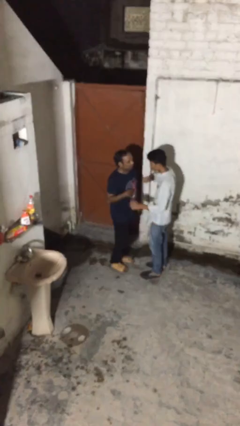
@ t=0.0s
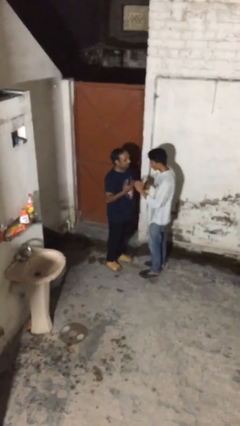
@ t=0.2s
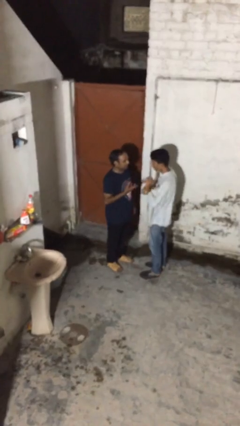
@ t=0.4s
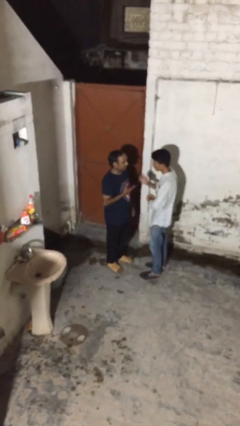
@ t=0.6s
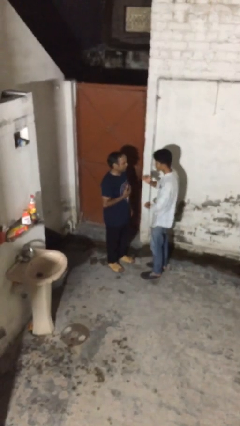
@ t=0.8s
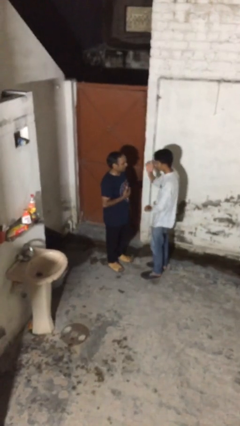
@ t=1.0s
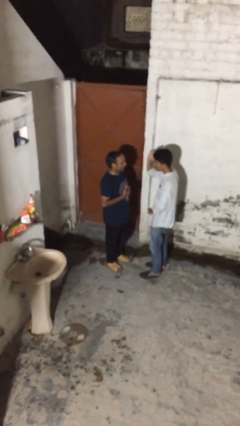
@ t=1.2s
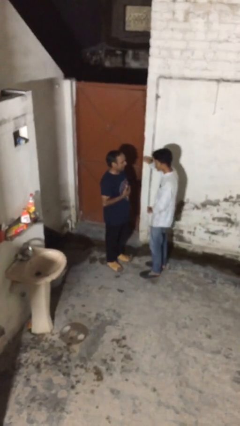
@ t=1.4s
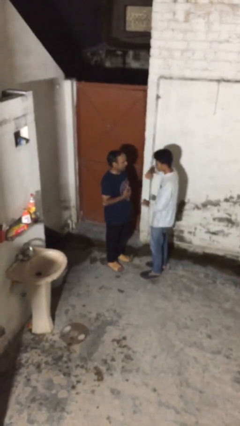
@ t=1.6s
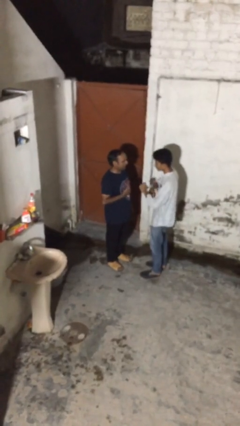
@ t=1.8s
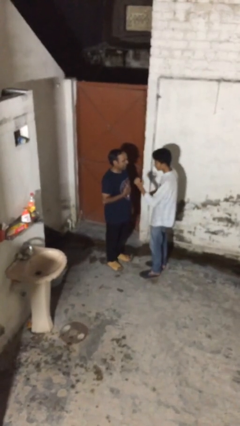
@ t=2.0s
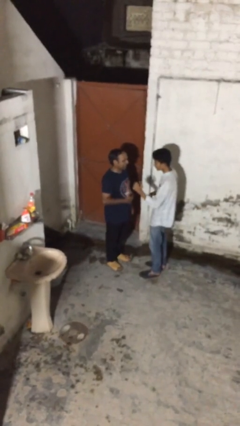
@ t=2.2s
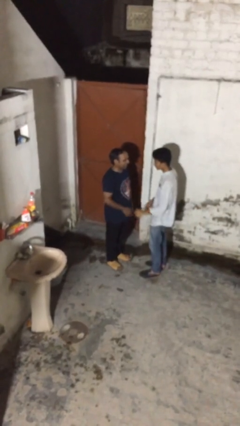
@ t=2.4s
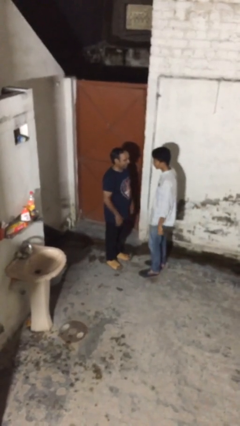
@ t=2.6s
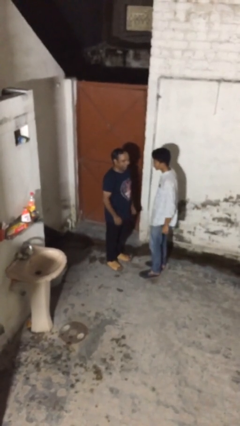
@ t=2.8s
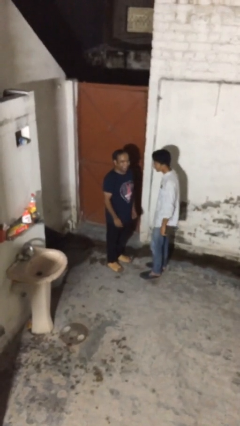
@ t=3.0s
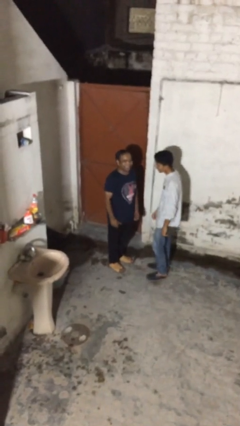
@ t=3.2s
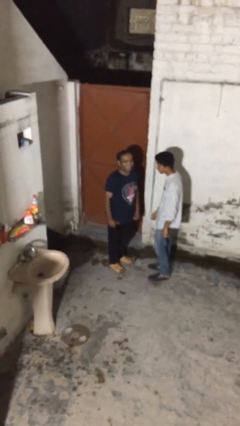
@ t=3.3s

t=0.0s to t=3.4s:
person talks to person

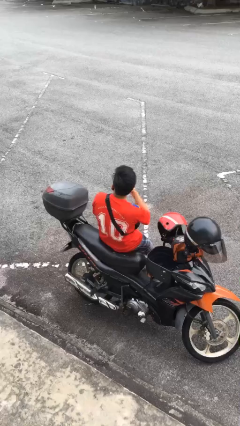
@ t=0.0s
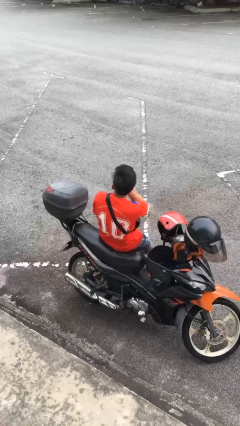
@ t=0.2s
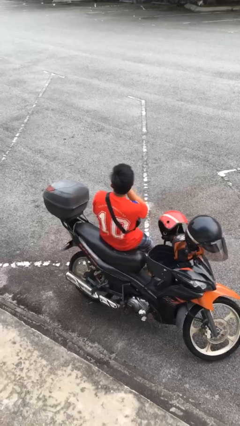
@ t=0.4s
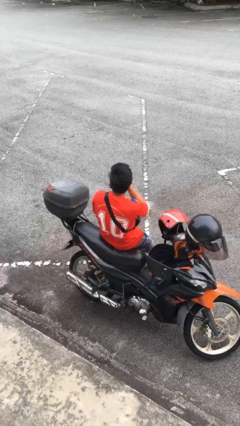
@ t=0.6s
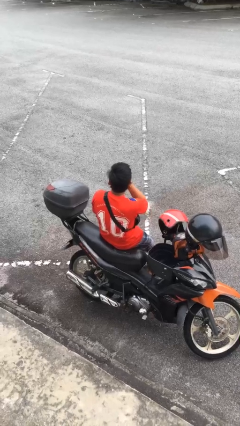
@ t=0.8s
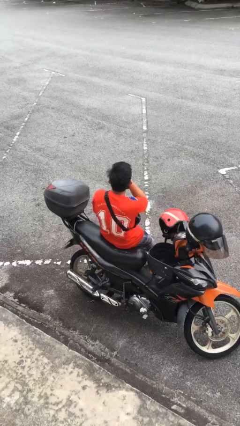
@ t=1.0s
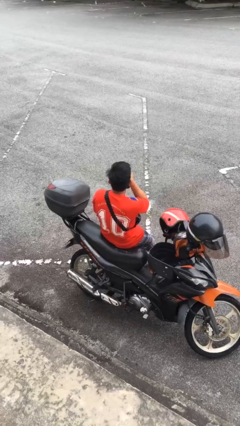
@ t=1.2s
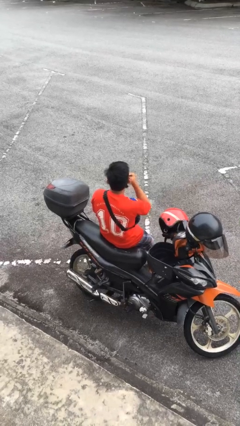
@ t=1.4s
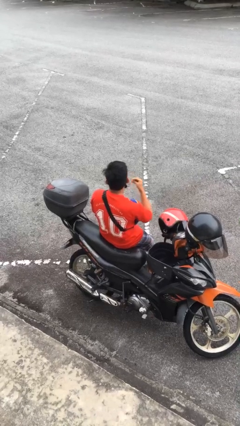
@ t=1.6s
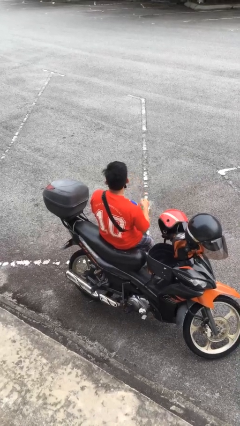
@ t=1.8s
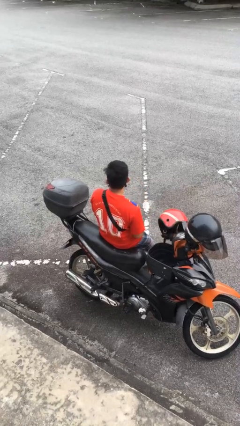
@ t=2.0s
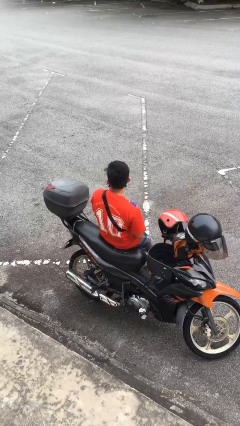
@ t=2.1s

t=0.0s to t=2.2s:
person scratches face

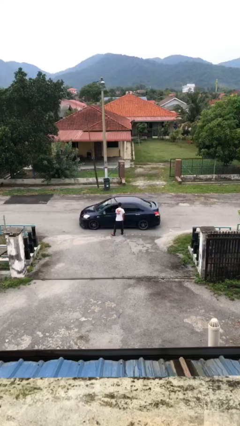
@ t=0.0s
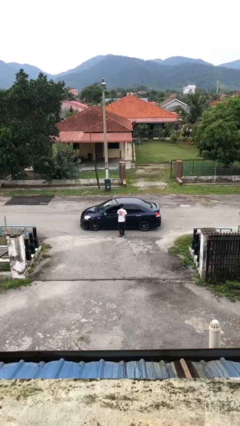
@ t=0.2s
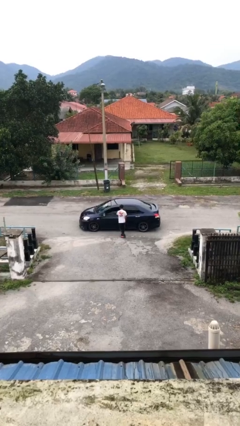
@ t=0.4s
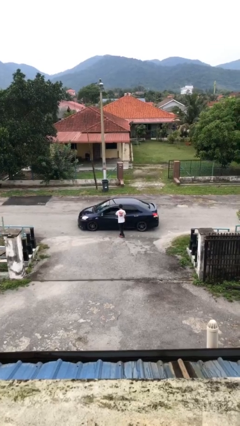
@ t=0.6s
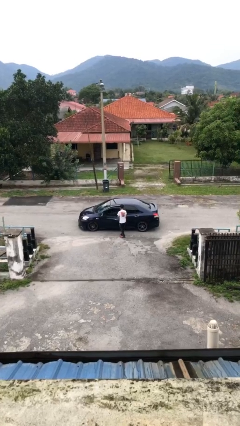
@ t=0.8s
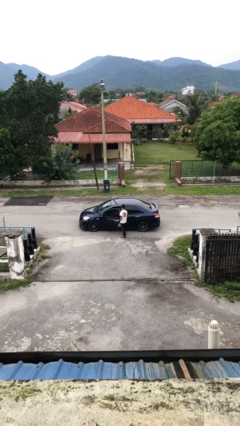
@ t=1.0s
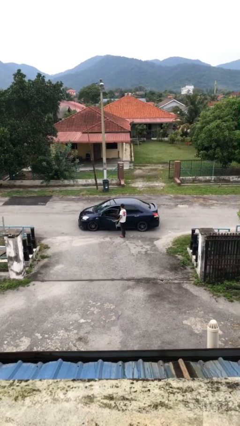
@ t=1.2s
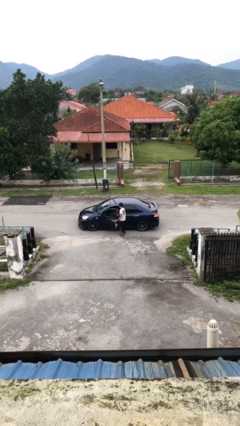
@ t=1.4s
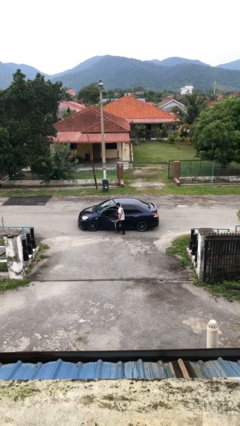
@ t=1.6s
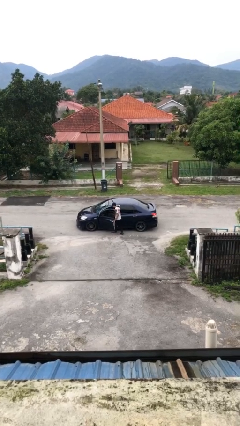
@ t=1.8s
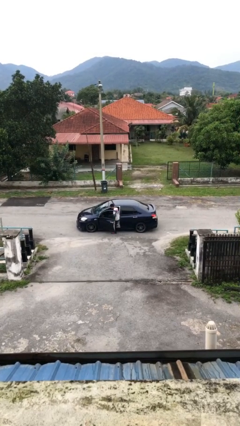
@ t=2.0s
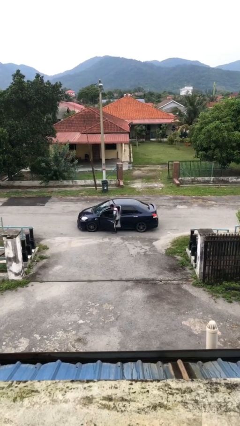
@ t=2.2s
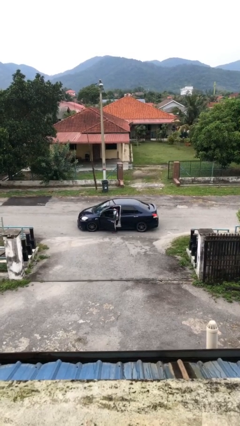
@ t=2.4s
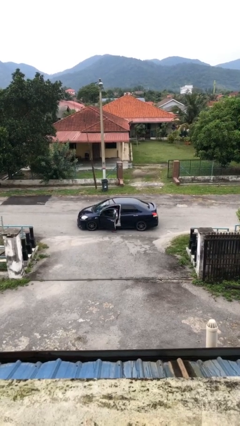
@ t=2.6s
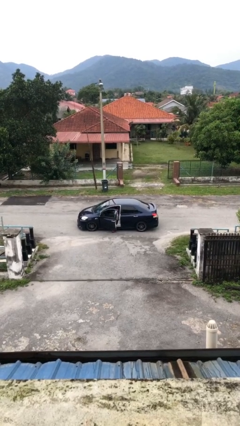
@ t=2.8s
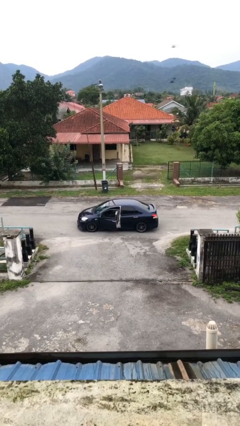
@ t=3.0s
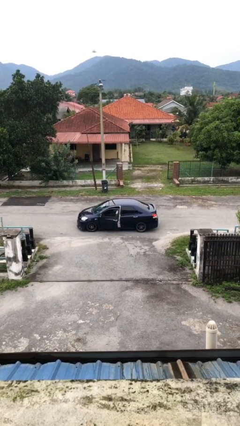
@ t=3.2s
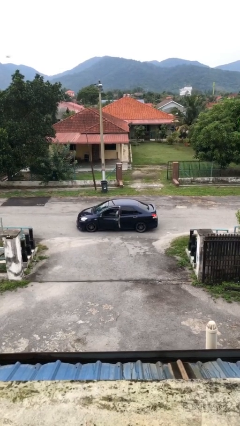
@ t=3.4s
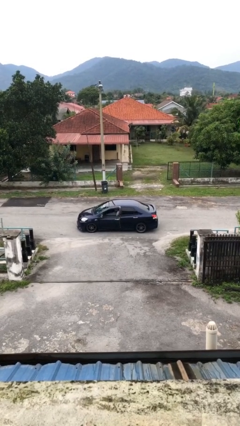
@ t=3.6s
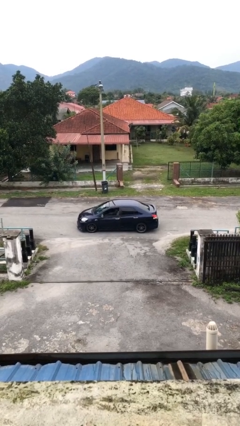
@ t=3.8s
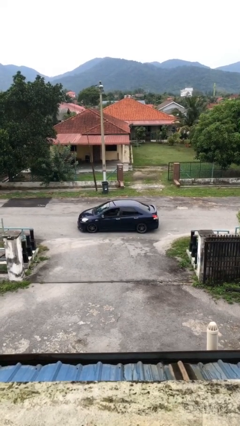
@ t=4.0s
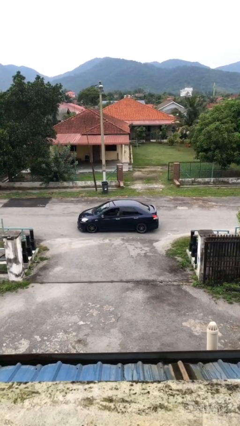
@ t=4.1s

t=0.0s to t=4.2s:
car picks up person

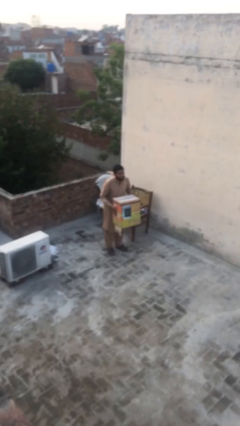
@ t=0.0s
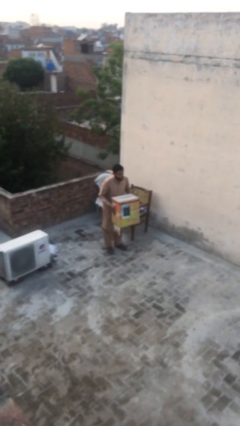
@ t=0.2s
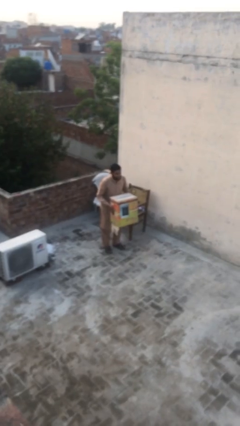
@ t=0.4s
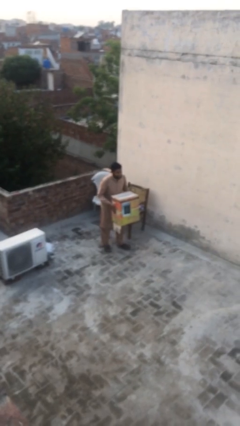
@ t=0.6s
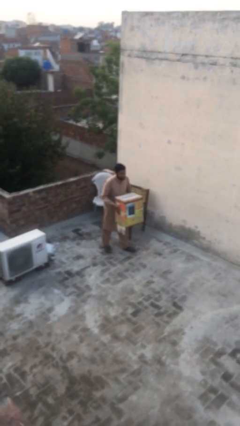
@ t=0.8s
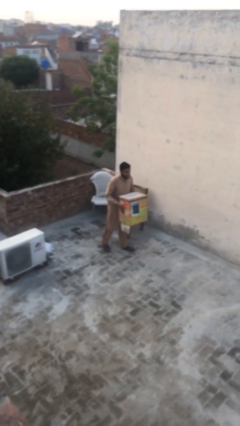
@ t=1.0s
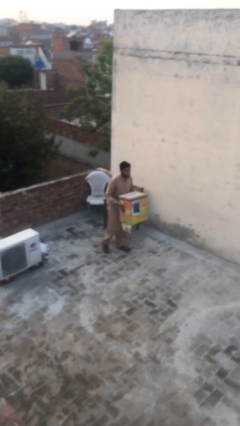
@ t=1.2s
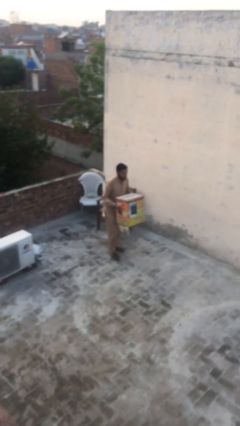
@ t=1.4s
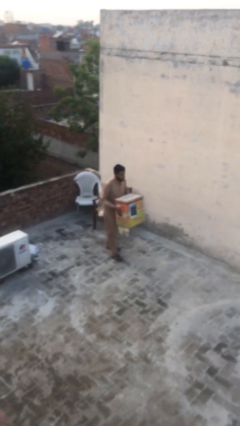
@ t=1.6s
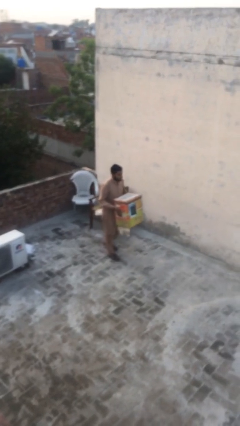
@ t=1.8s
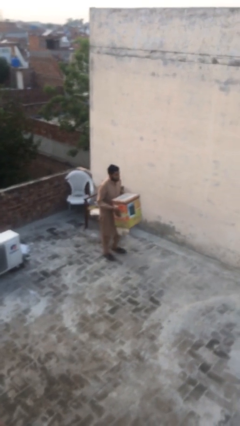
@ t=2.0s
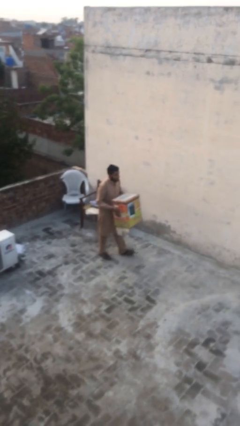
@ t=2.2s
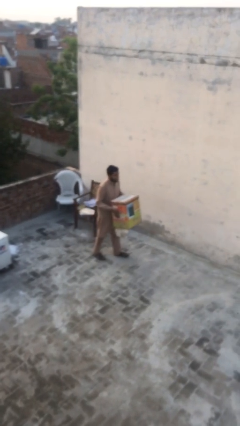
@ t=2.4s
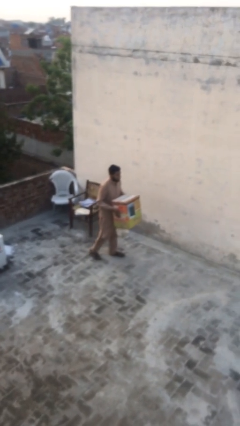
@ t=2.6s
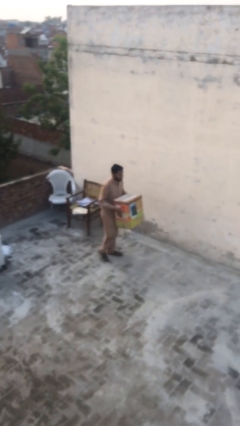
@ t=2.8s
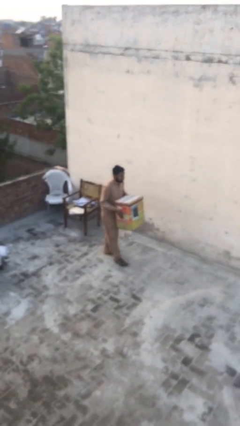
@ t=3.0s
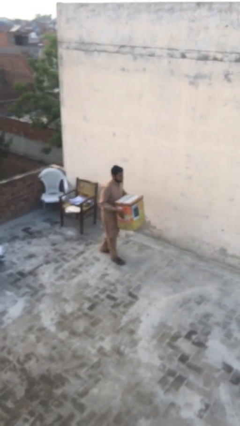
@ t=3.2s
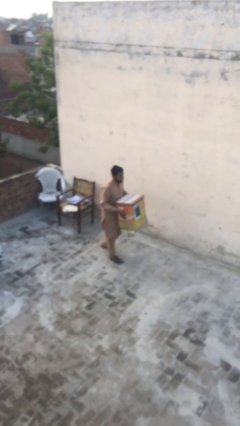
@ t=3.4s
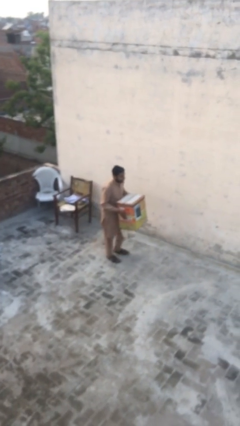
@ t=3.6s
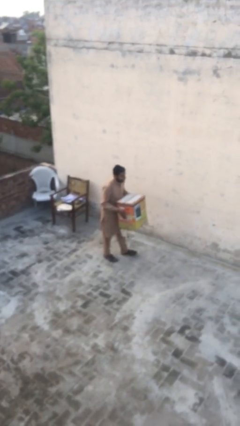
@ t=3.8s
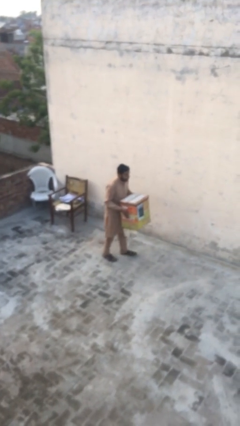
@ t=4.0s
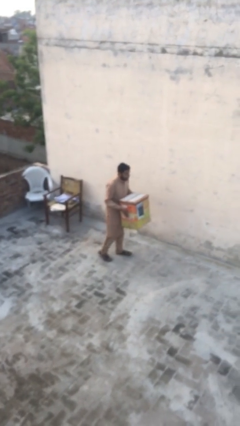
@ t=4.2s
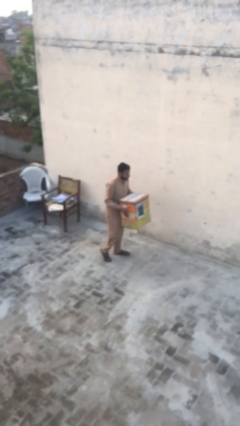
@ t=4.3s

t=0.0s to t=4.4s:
person carries heavy object

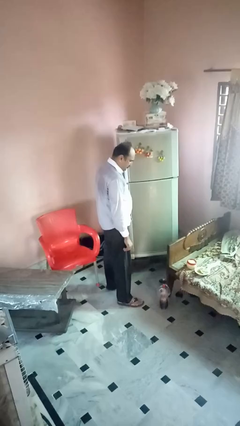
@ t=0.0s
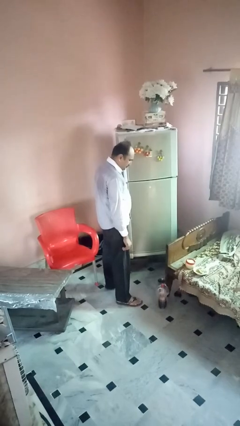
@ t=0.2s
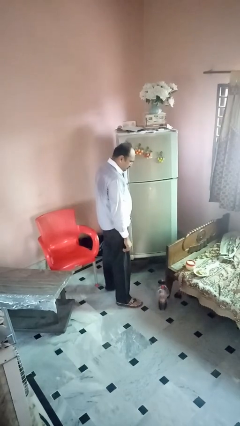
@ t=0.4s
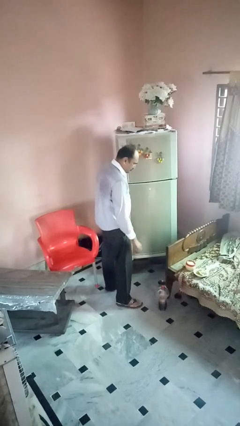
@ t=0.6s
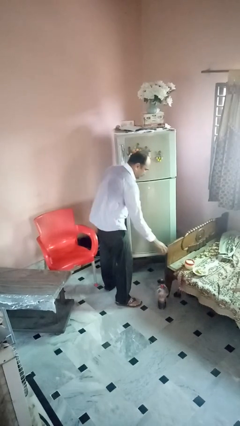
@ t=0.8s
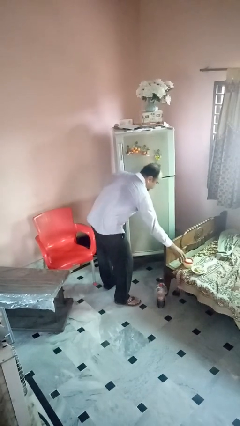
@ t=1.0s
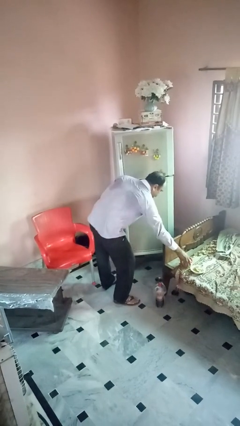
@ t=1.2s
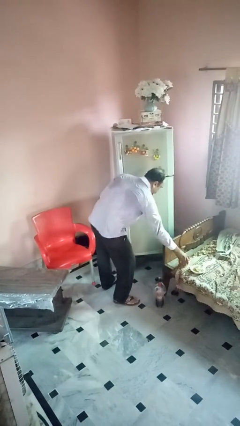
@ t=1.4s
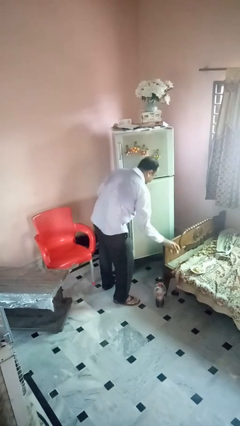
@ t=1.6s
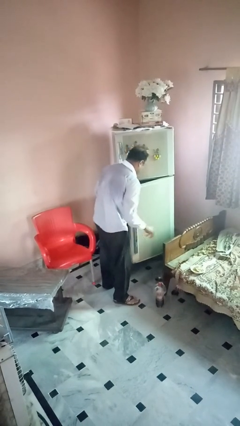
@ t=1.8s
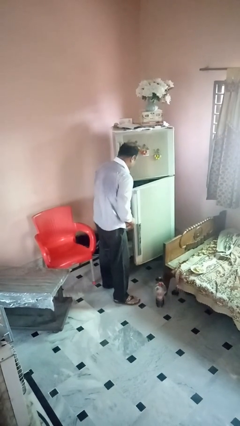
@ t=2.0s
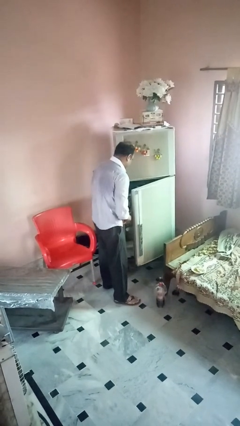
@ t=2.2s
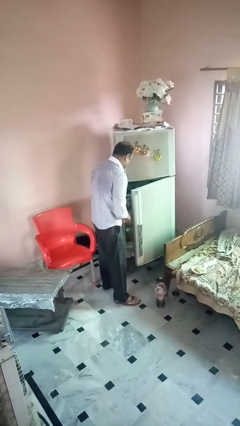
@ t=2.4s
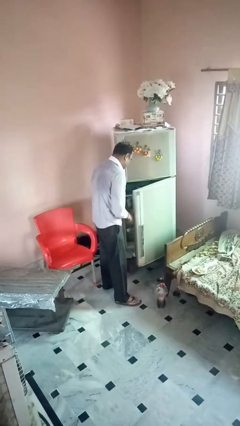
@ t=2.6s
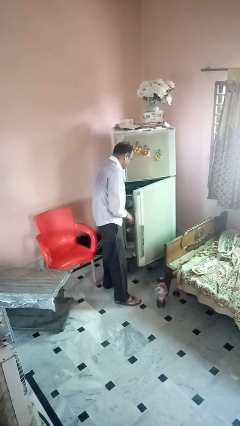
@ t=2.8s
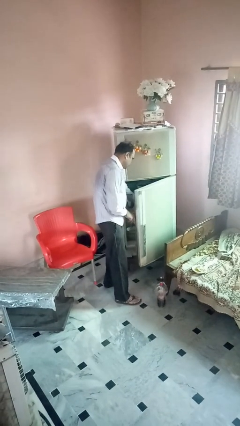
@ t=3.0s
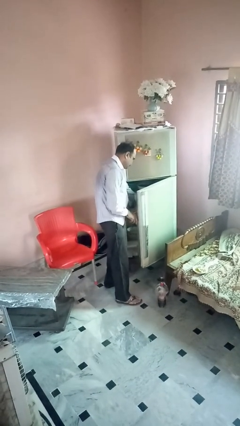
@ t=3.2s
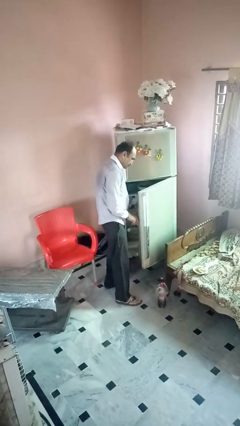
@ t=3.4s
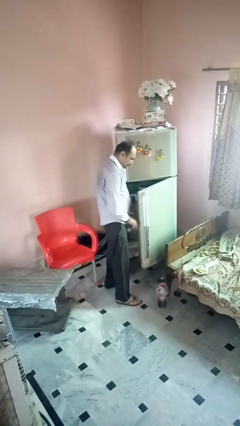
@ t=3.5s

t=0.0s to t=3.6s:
person loads groceries into refrigerator
